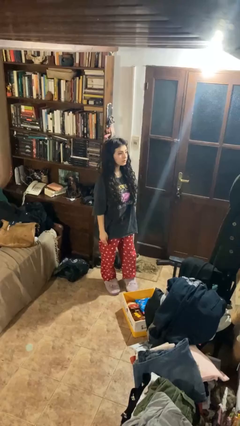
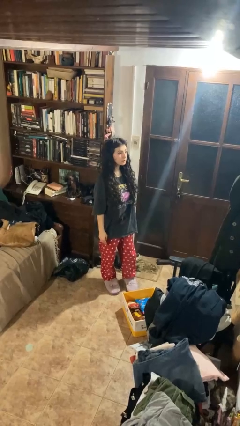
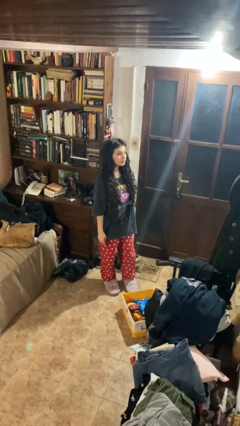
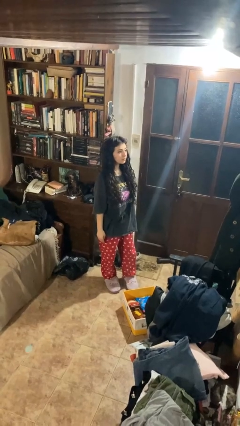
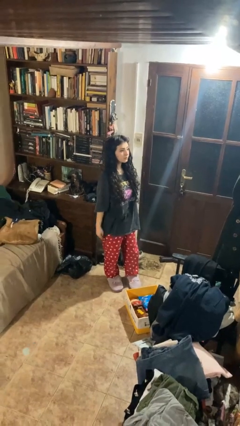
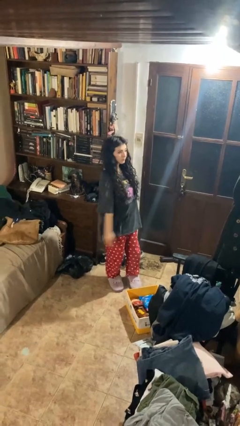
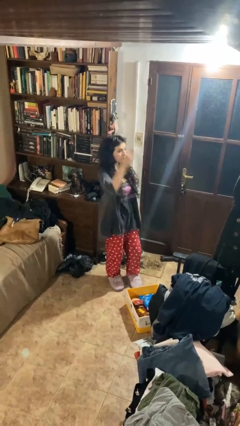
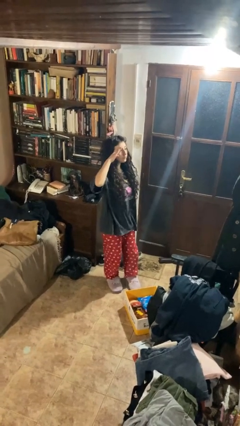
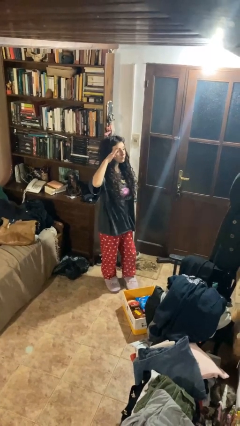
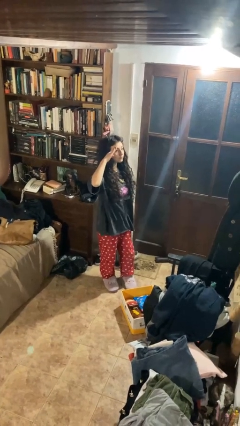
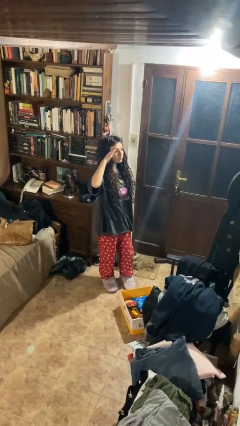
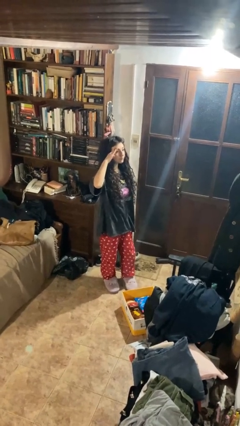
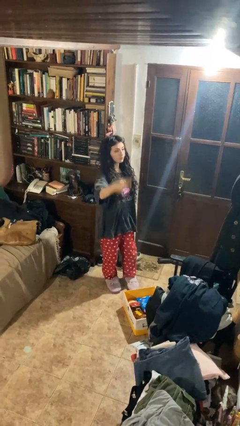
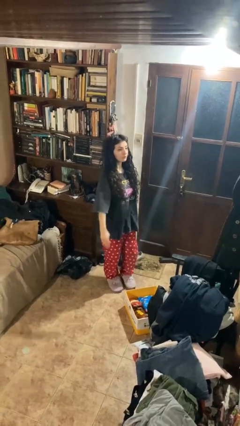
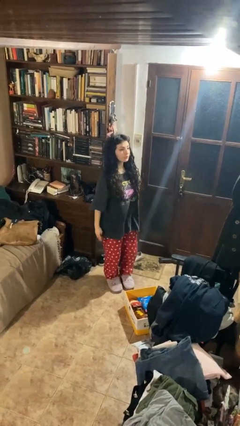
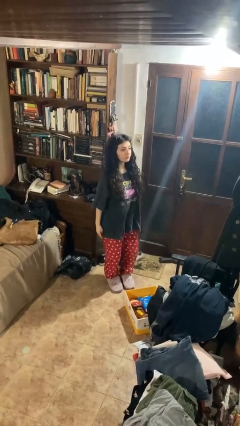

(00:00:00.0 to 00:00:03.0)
person salutes

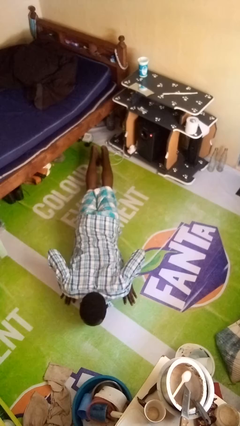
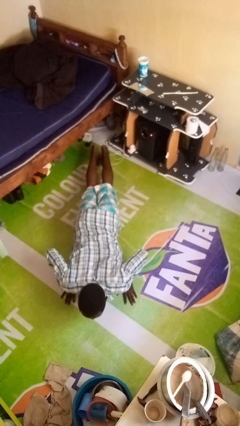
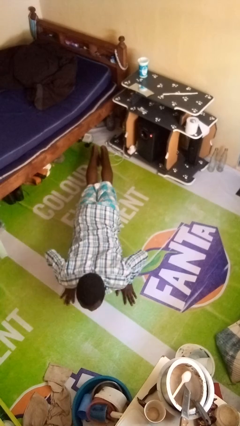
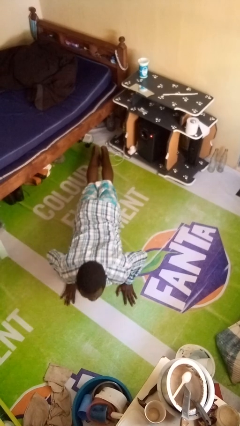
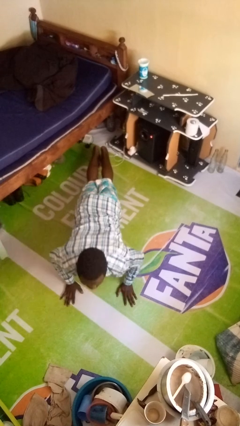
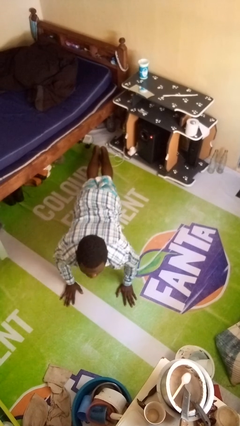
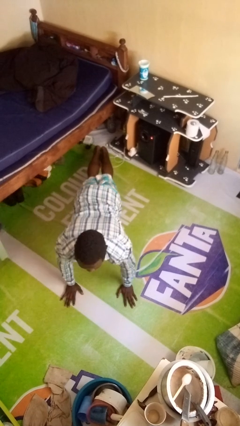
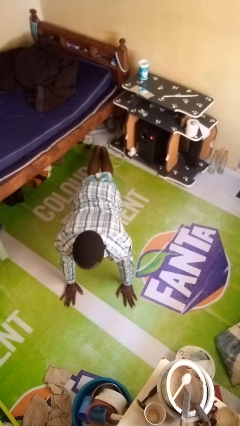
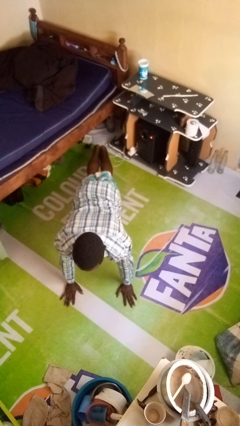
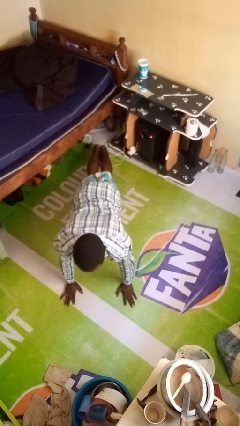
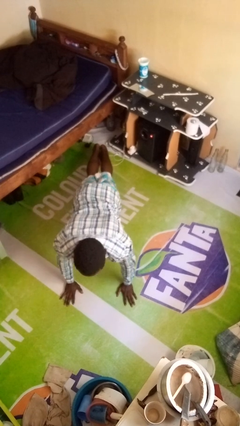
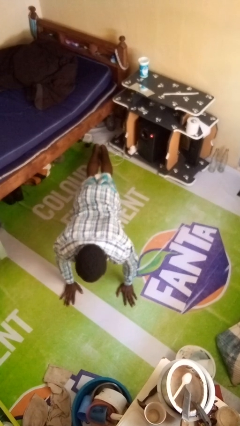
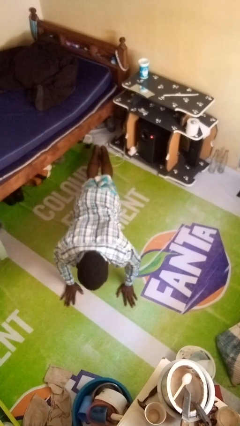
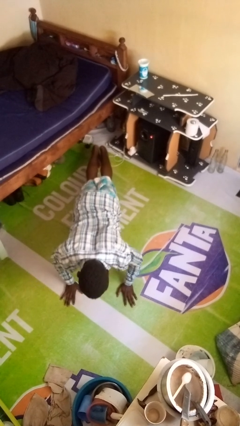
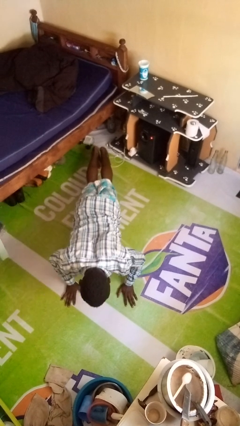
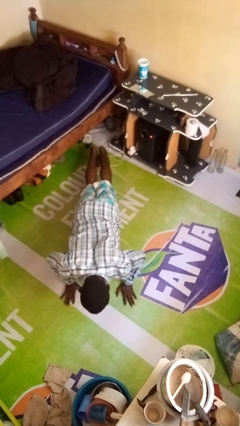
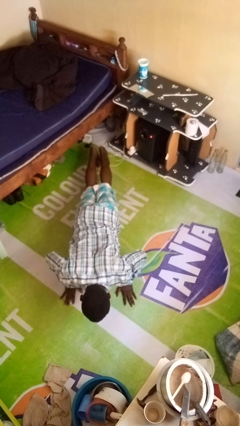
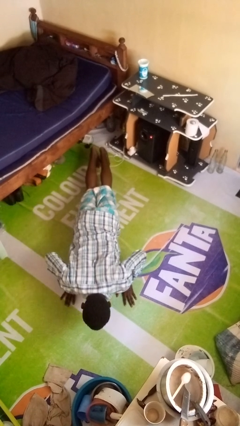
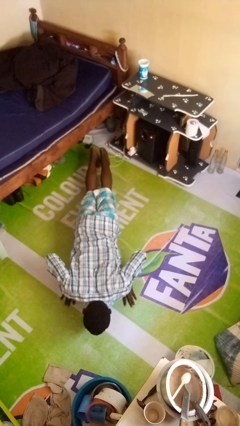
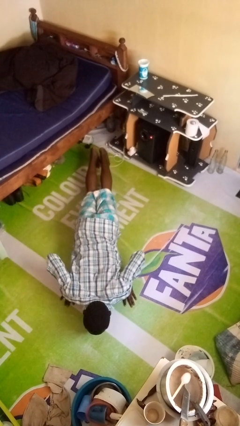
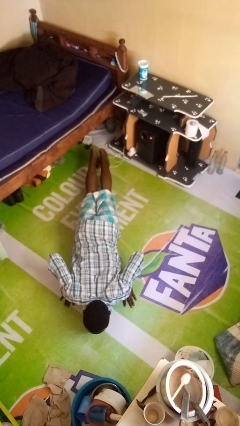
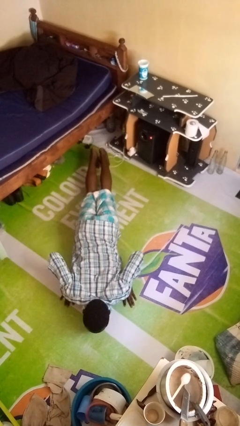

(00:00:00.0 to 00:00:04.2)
person exercises with pushup

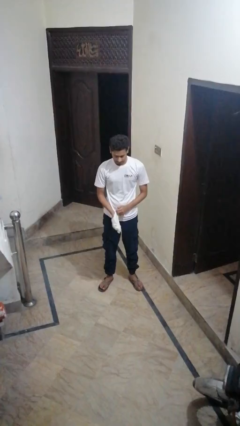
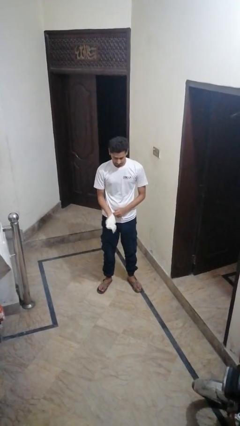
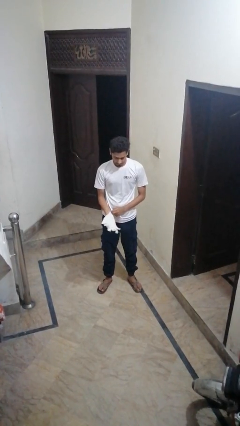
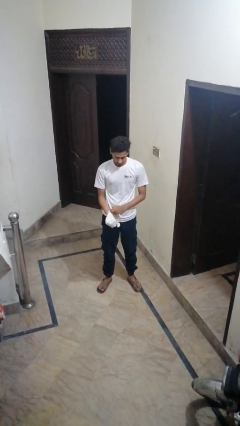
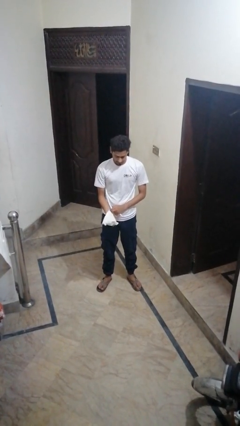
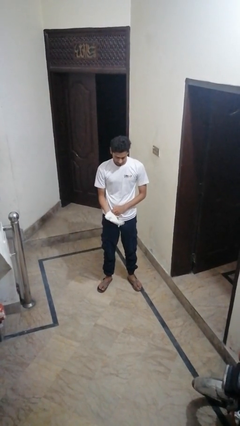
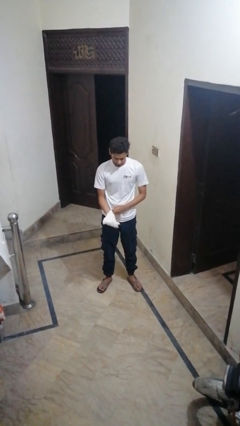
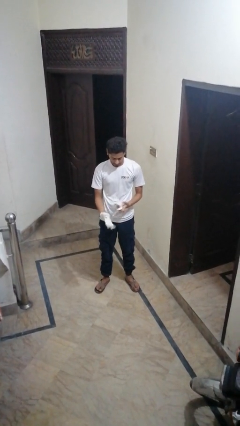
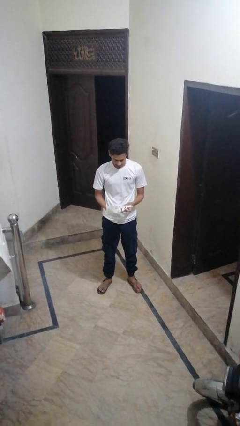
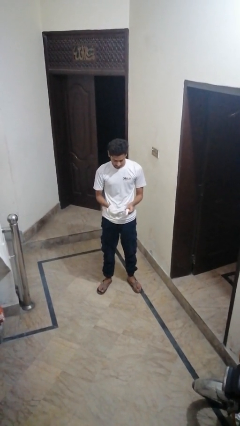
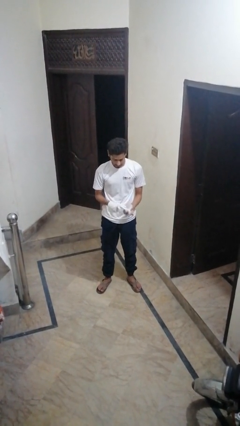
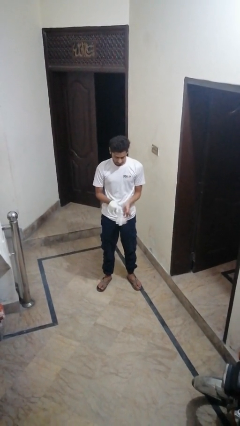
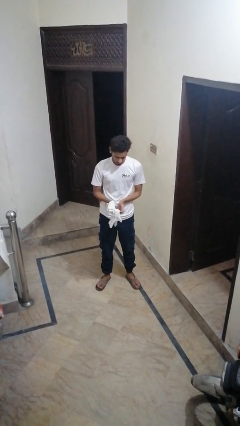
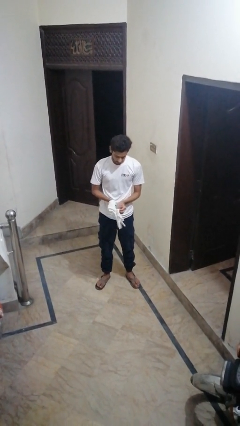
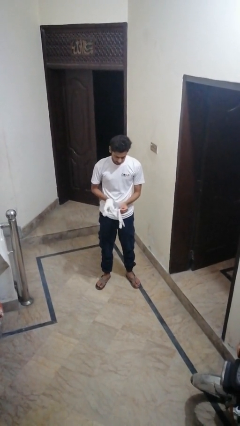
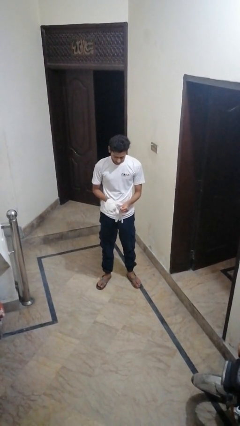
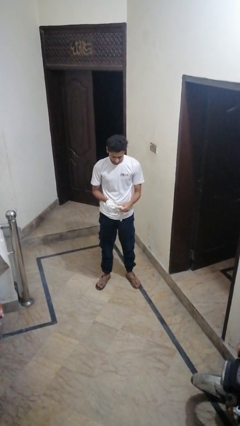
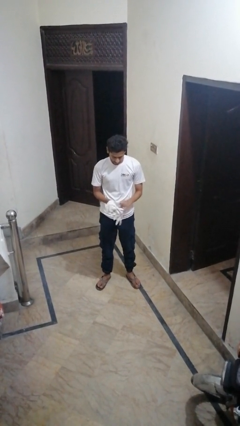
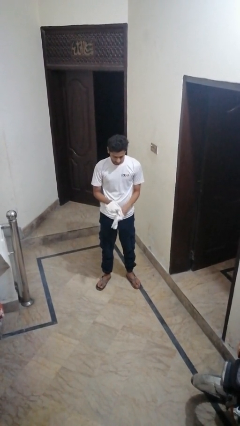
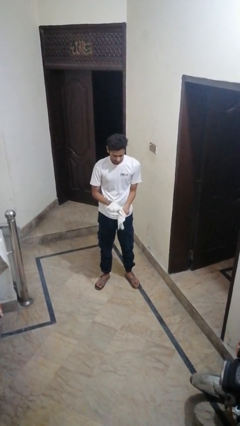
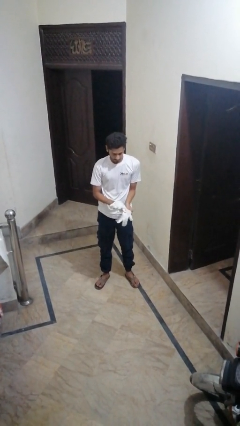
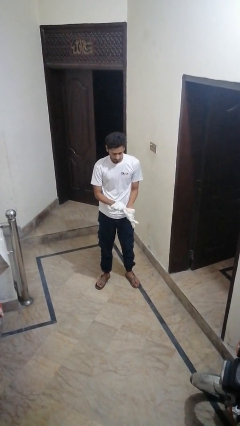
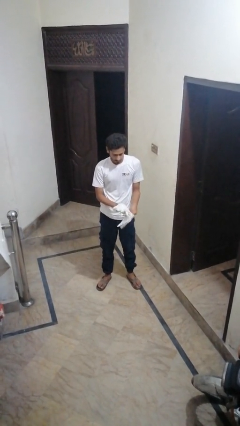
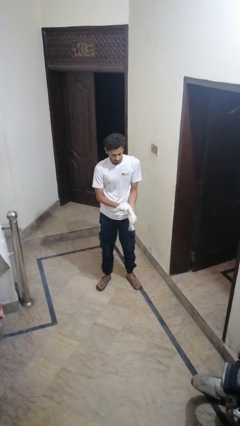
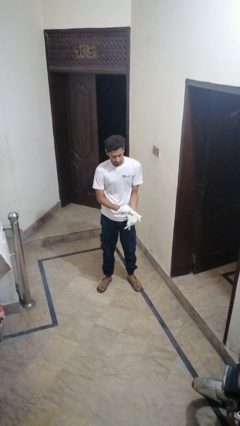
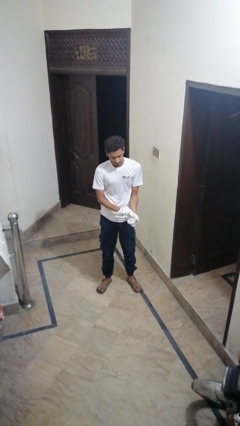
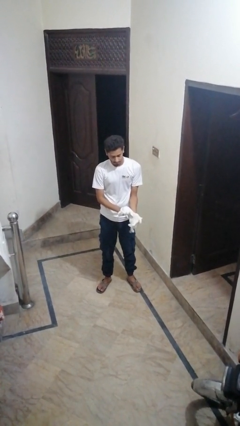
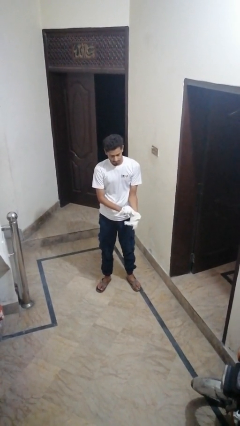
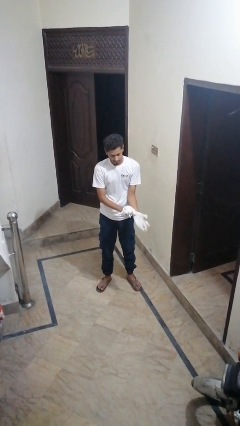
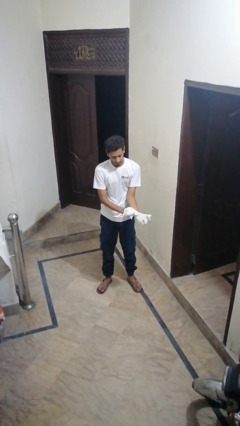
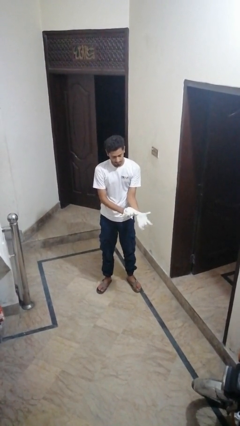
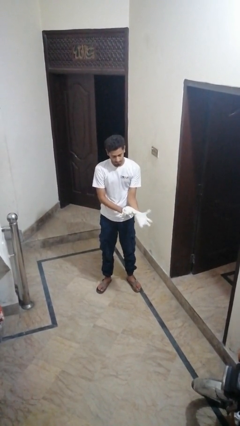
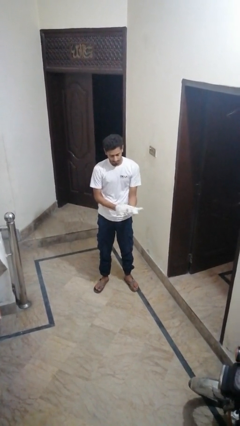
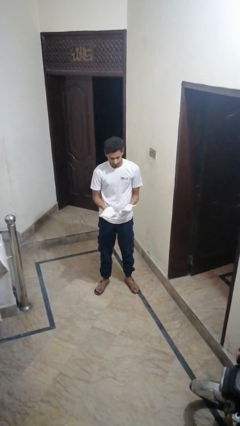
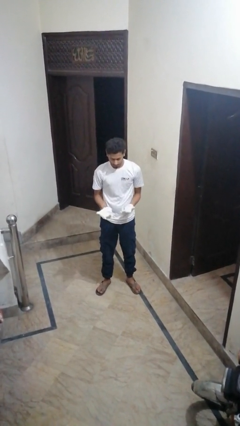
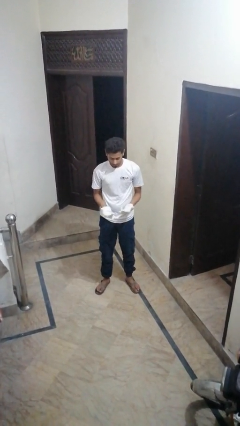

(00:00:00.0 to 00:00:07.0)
person puts on gloves

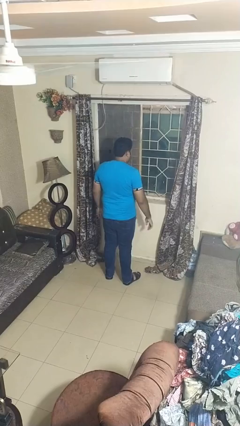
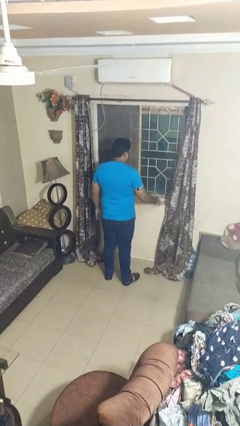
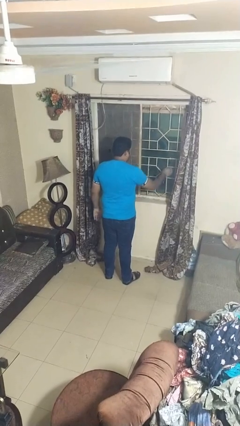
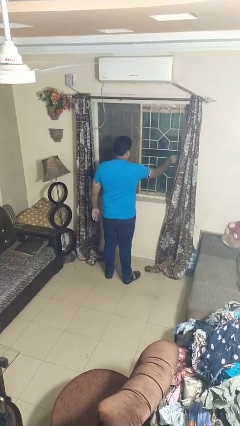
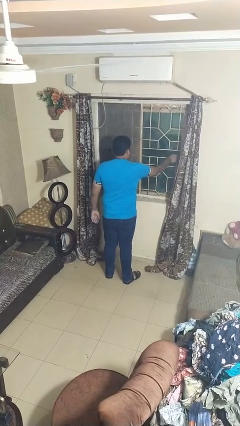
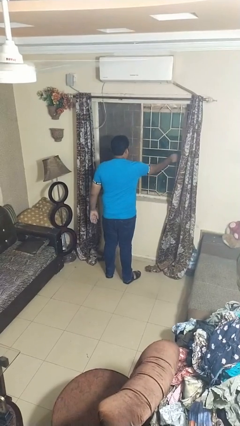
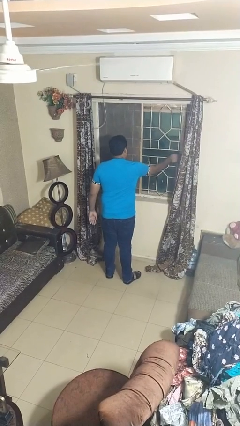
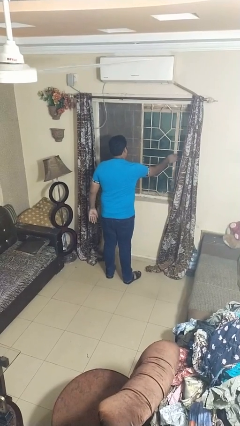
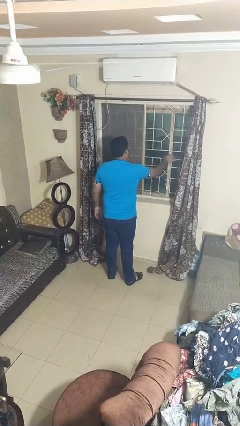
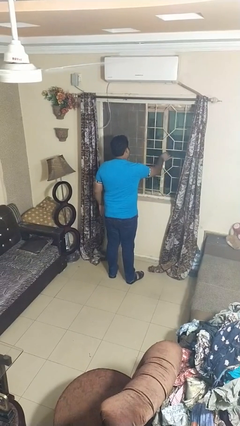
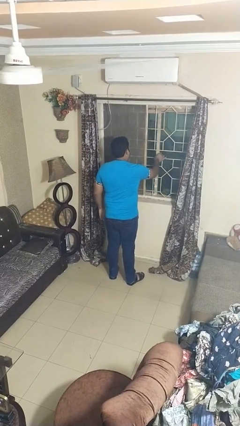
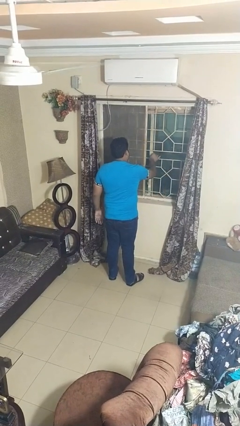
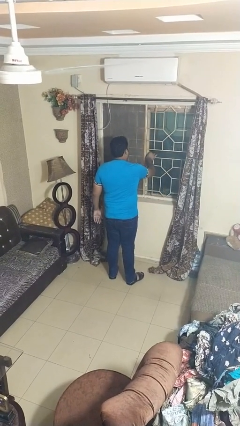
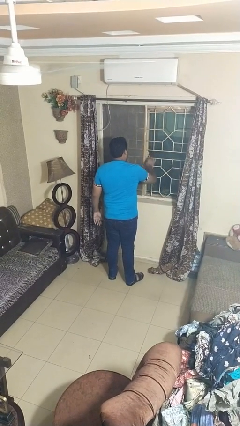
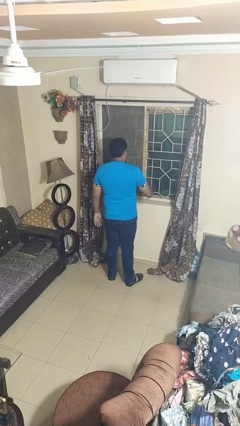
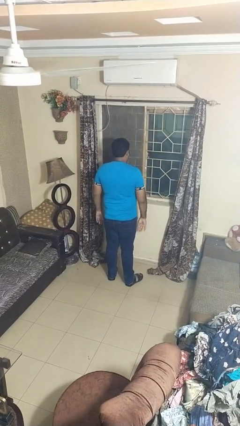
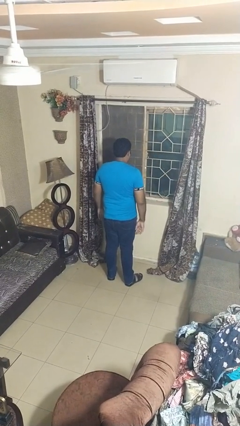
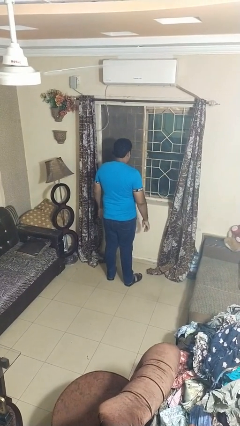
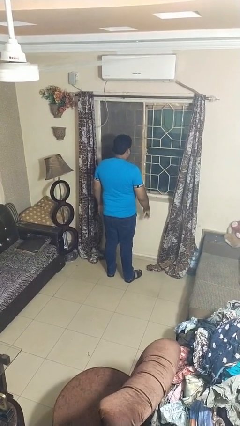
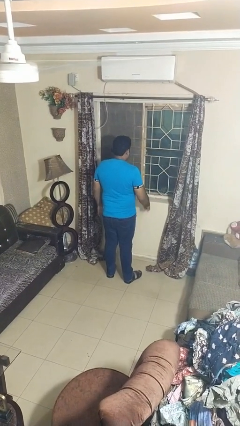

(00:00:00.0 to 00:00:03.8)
person closes home window
